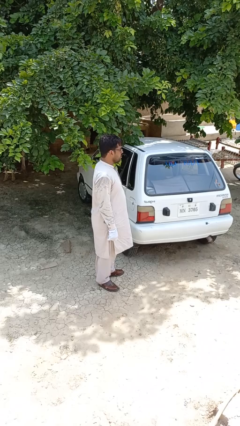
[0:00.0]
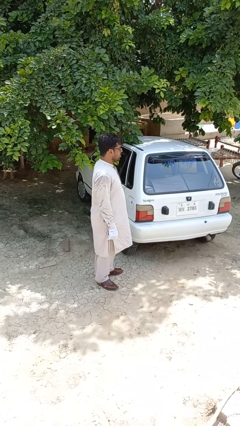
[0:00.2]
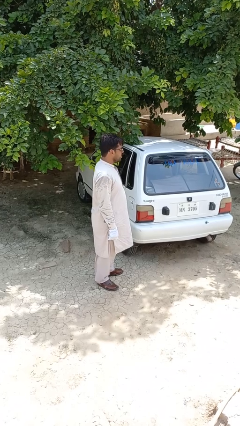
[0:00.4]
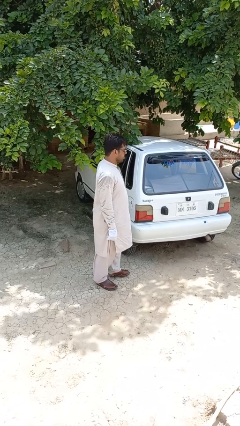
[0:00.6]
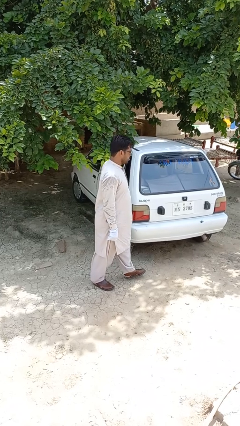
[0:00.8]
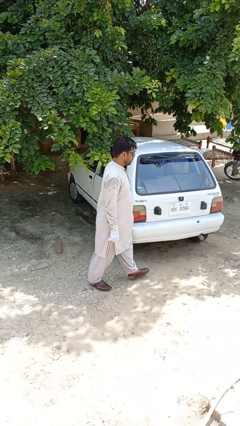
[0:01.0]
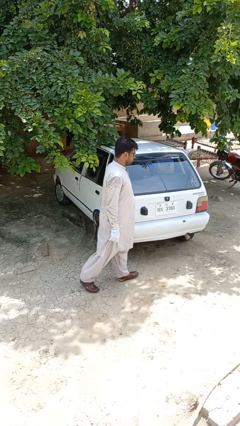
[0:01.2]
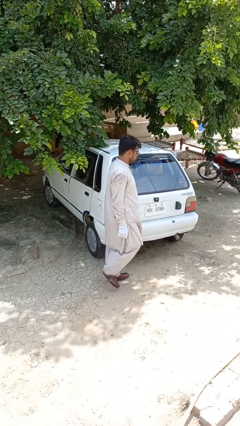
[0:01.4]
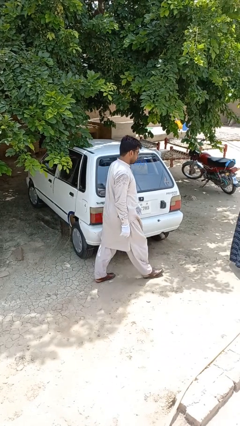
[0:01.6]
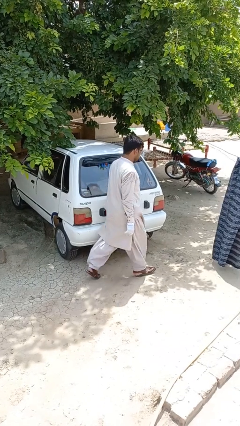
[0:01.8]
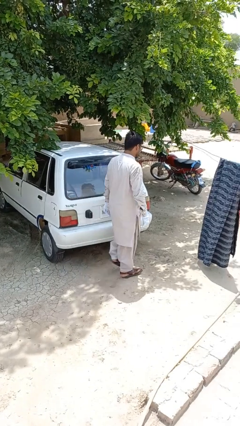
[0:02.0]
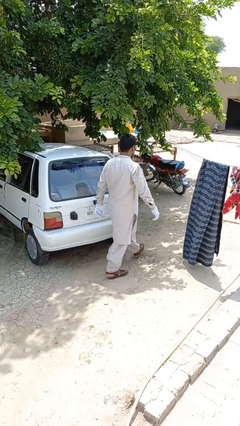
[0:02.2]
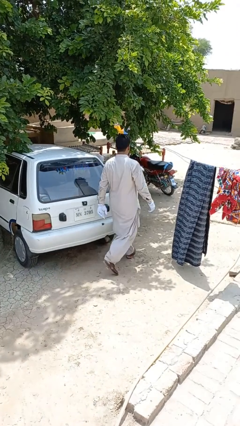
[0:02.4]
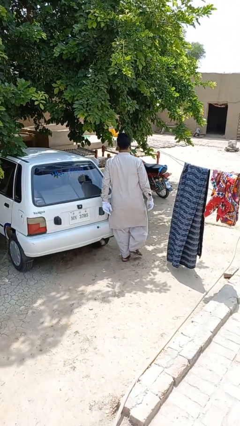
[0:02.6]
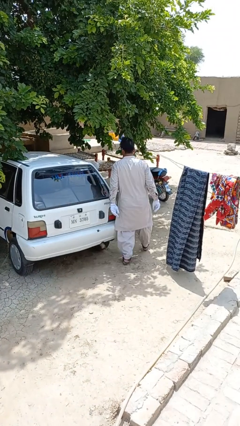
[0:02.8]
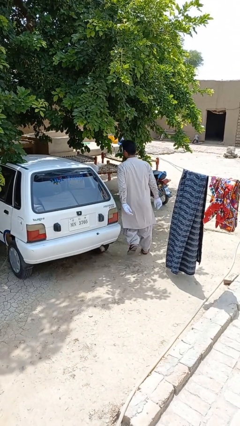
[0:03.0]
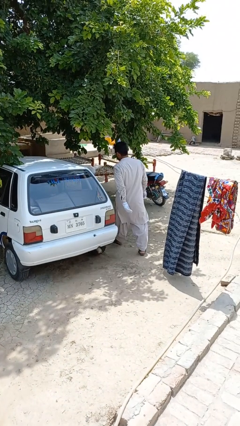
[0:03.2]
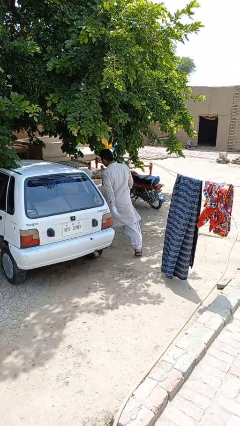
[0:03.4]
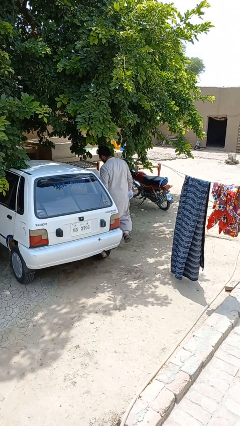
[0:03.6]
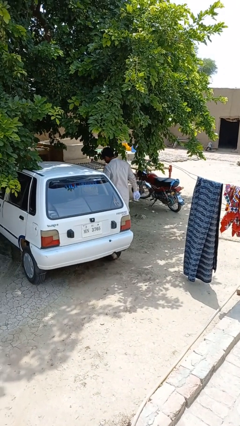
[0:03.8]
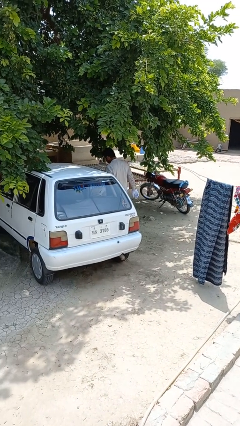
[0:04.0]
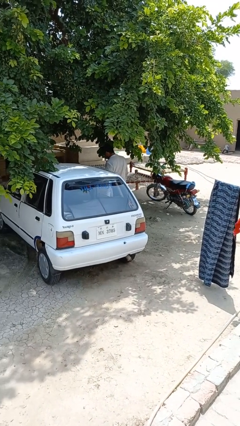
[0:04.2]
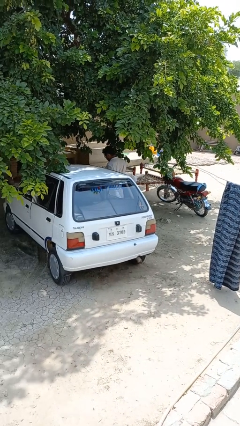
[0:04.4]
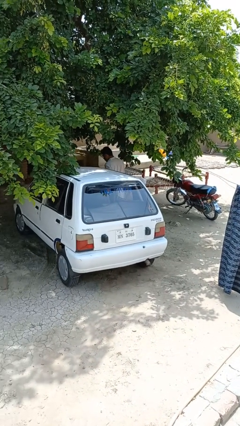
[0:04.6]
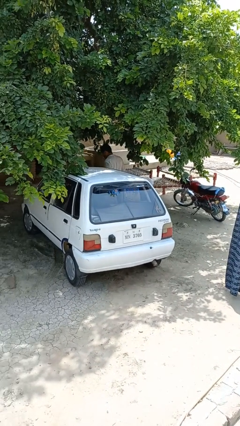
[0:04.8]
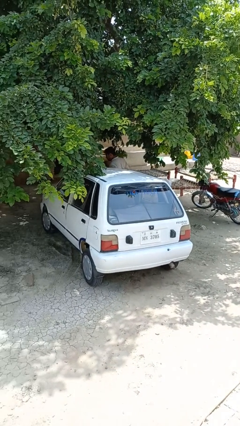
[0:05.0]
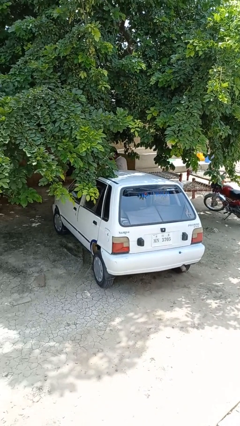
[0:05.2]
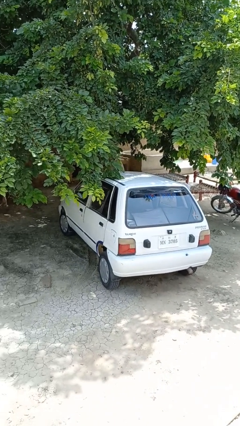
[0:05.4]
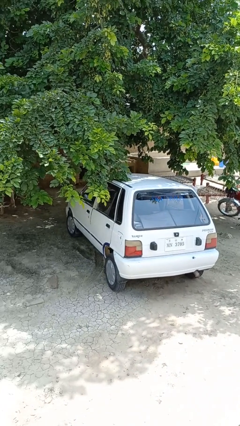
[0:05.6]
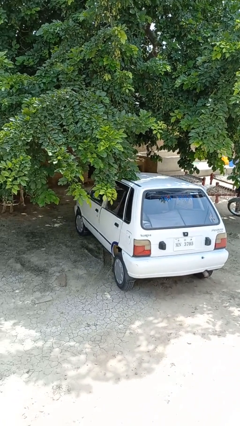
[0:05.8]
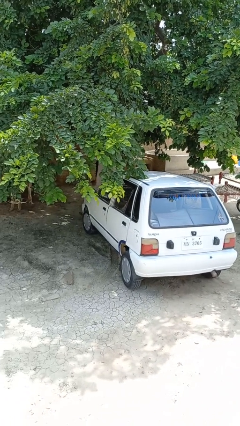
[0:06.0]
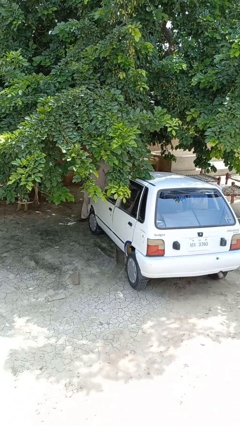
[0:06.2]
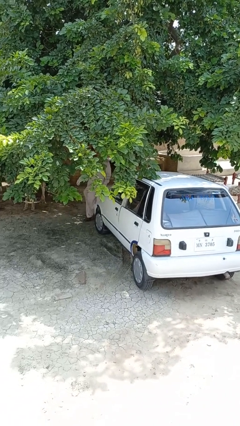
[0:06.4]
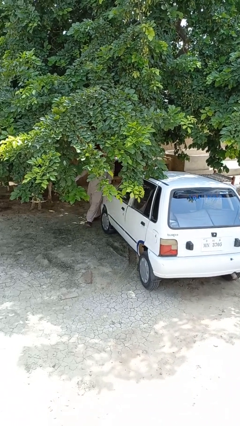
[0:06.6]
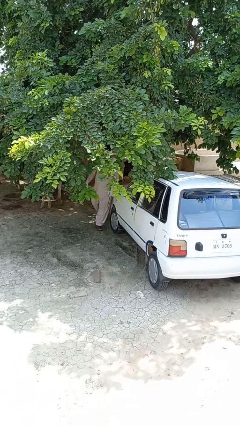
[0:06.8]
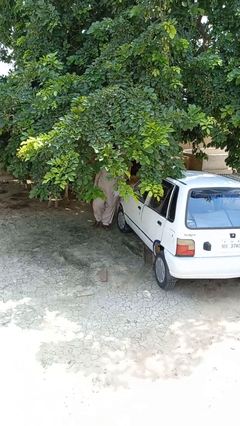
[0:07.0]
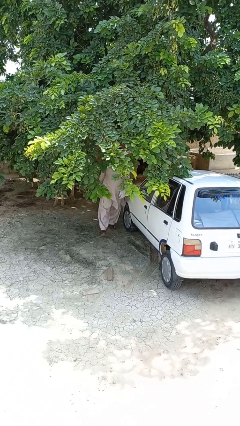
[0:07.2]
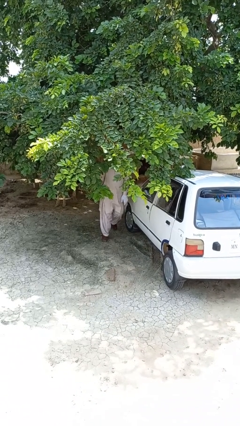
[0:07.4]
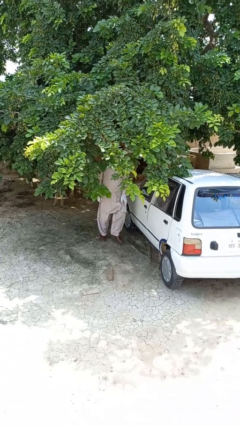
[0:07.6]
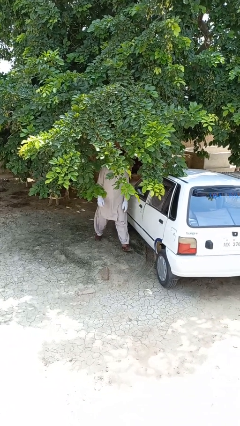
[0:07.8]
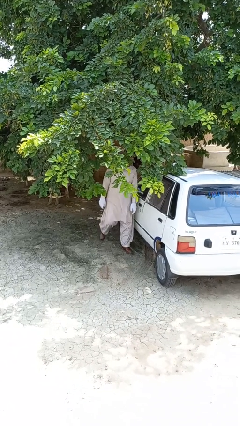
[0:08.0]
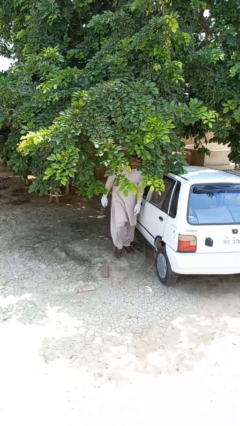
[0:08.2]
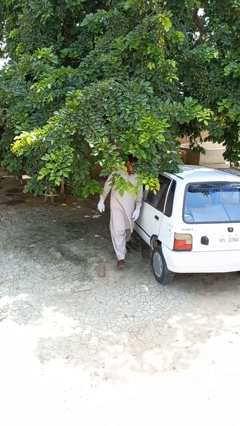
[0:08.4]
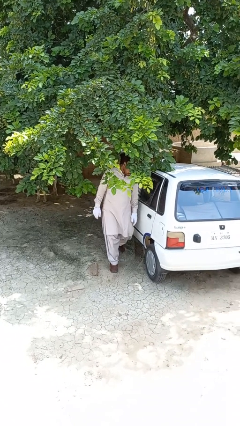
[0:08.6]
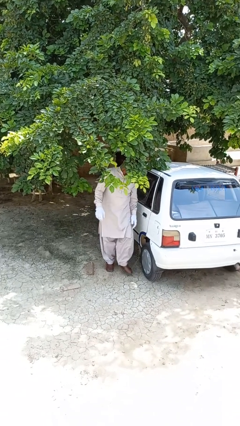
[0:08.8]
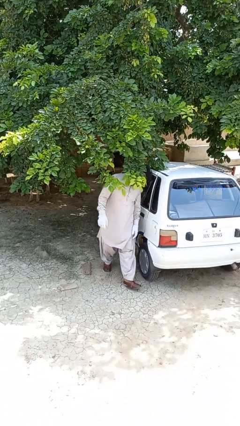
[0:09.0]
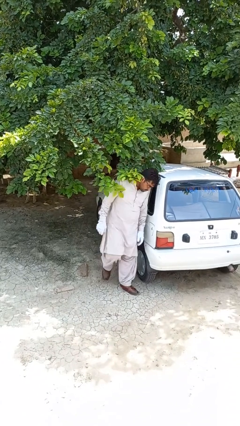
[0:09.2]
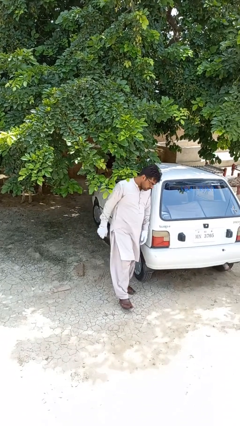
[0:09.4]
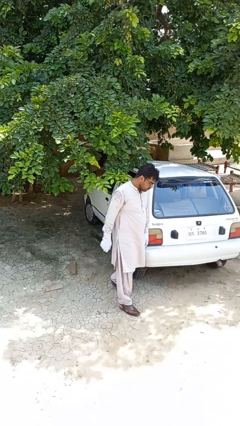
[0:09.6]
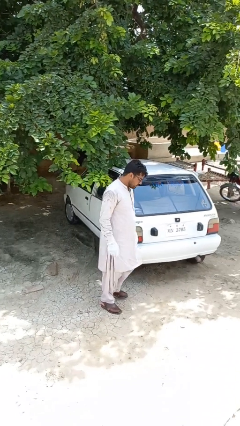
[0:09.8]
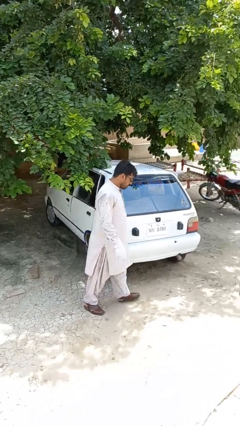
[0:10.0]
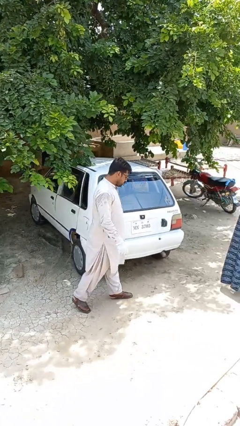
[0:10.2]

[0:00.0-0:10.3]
person walks around car

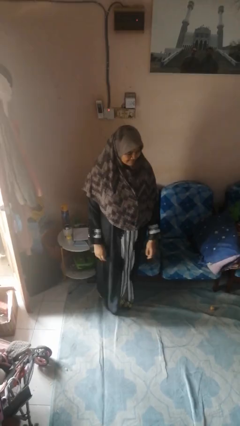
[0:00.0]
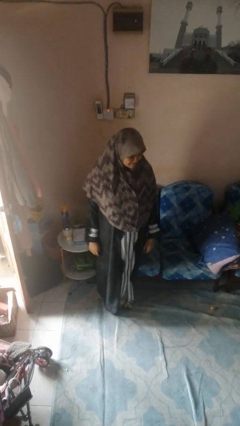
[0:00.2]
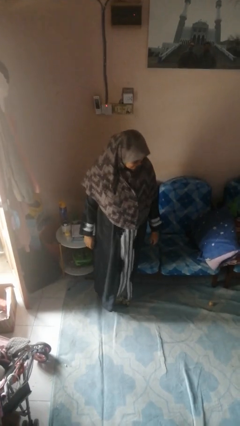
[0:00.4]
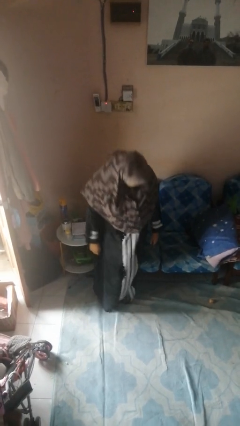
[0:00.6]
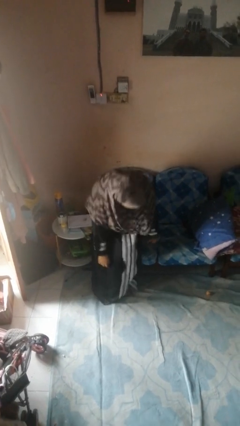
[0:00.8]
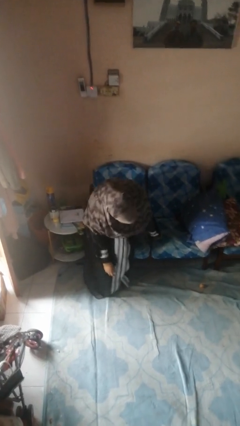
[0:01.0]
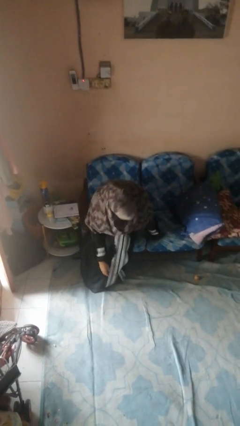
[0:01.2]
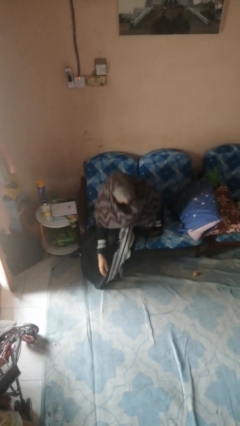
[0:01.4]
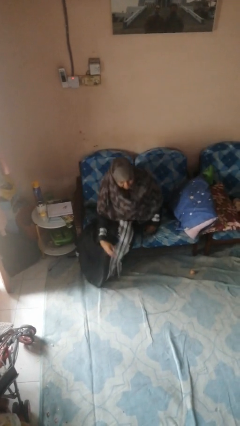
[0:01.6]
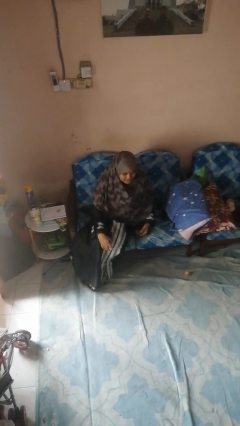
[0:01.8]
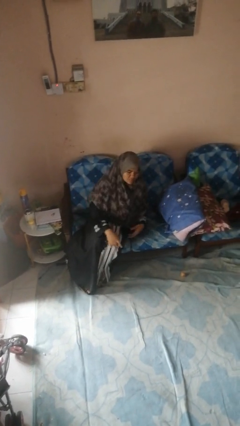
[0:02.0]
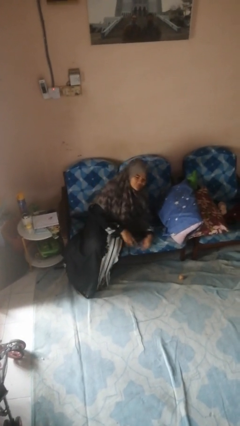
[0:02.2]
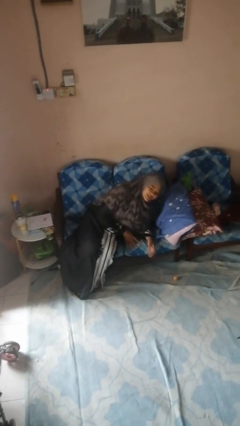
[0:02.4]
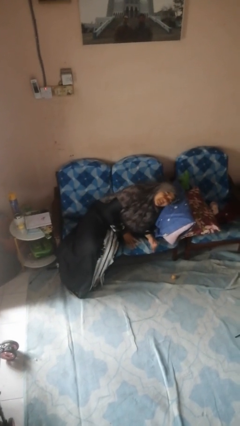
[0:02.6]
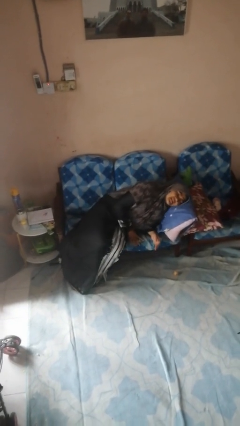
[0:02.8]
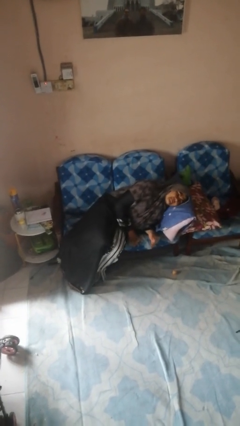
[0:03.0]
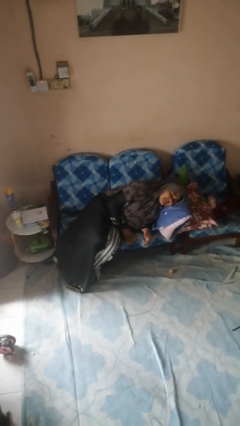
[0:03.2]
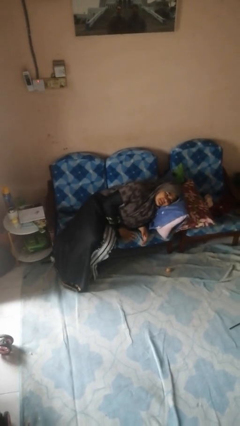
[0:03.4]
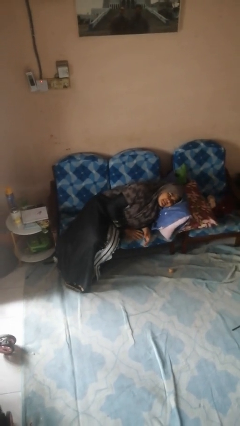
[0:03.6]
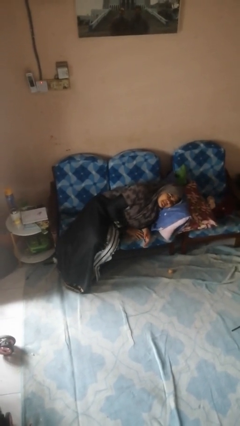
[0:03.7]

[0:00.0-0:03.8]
person lies down on couch

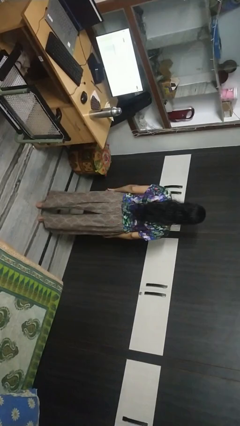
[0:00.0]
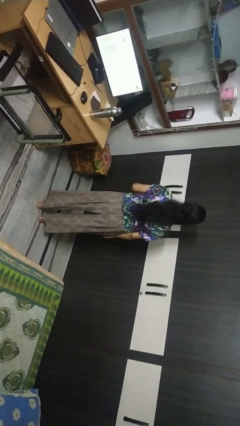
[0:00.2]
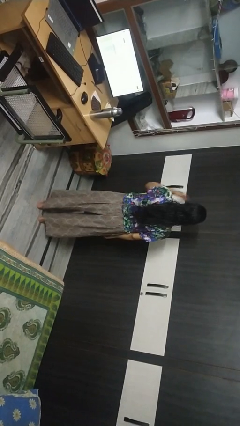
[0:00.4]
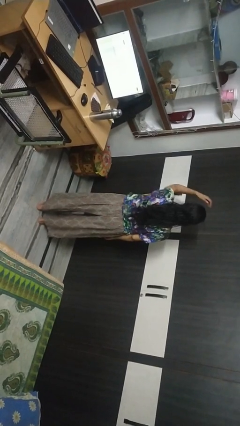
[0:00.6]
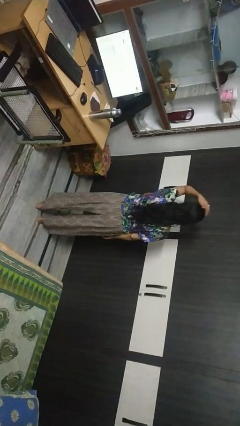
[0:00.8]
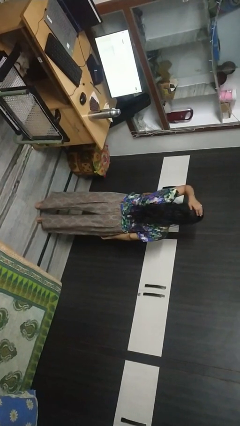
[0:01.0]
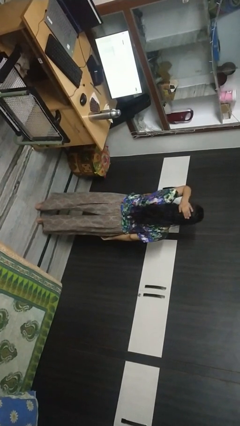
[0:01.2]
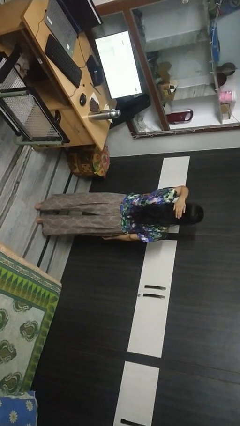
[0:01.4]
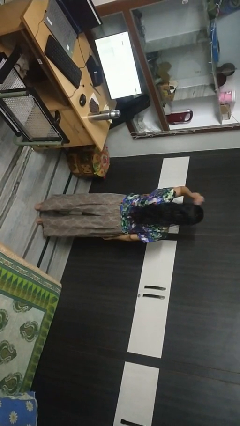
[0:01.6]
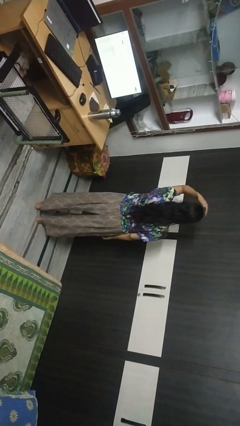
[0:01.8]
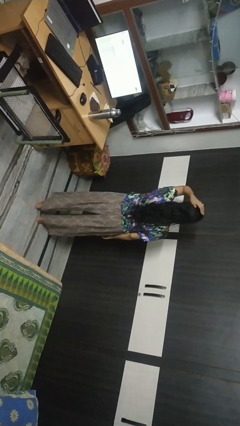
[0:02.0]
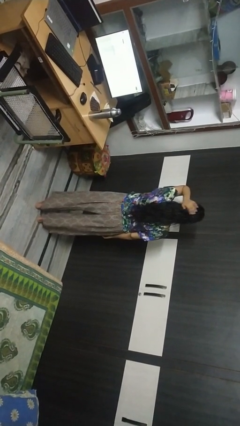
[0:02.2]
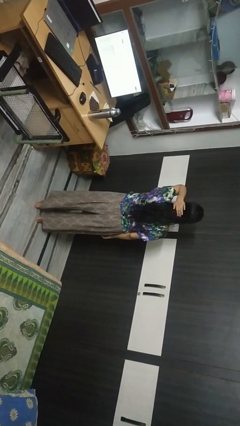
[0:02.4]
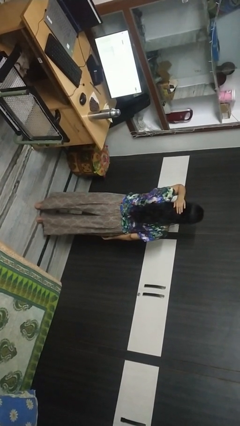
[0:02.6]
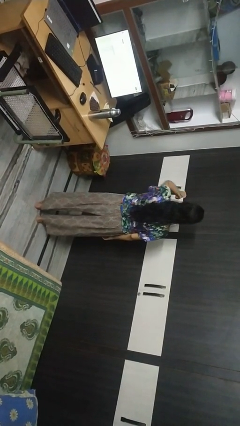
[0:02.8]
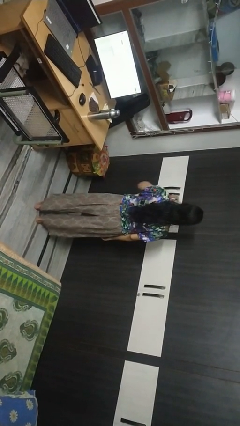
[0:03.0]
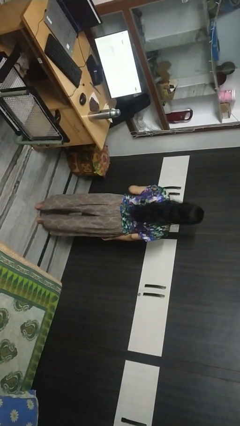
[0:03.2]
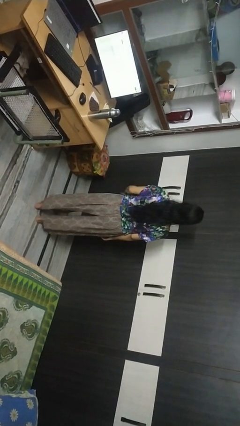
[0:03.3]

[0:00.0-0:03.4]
person pats head

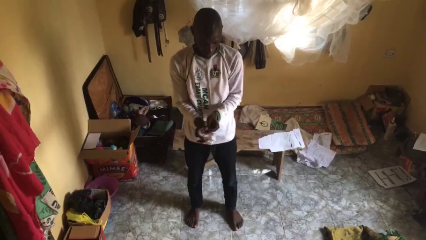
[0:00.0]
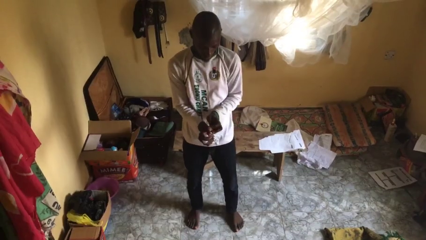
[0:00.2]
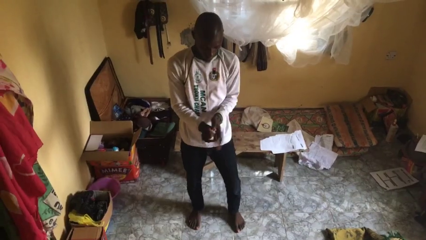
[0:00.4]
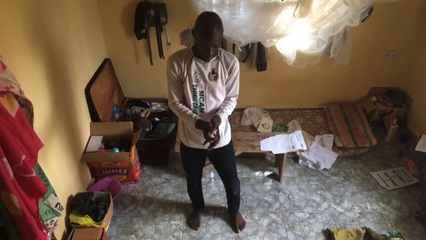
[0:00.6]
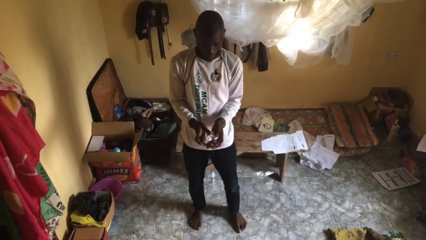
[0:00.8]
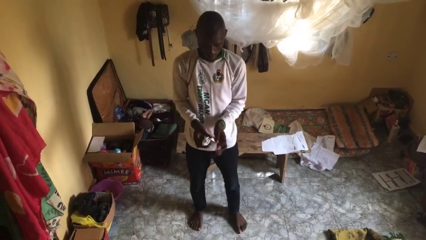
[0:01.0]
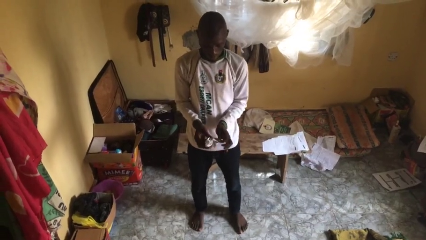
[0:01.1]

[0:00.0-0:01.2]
person crumples paper
